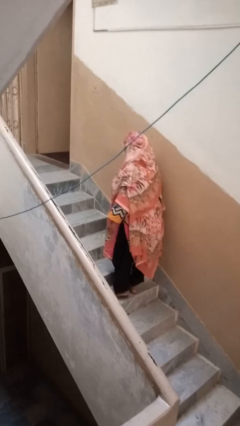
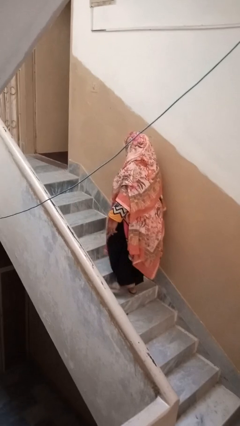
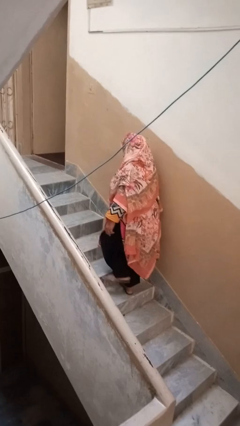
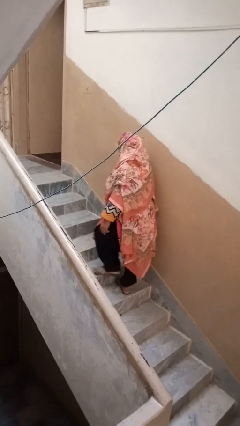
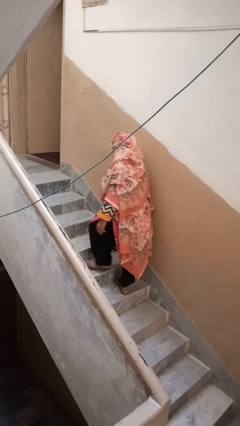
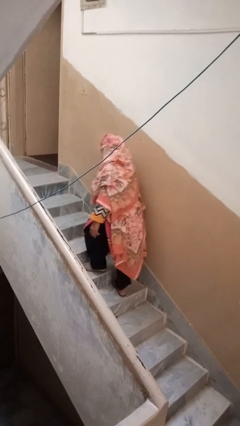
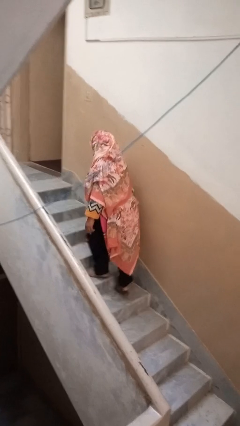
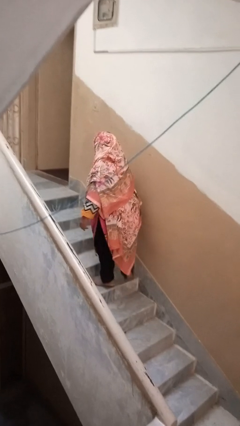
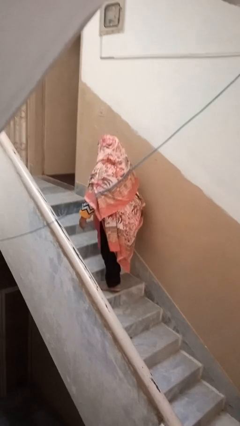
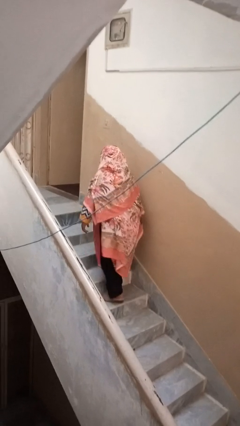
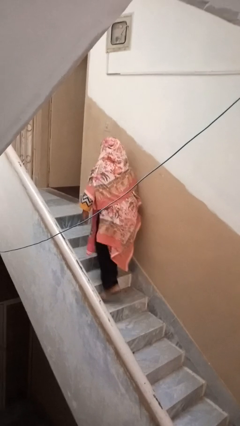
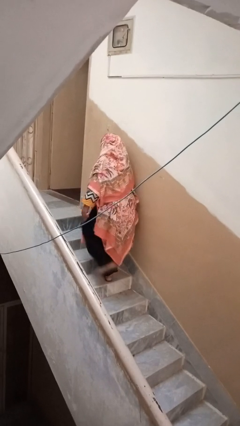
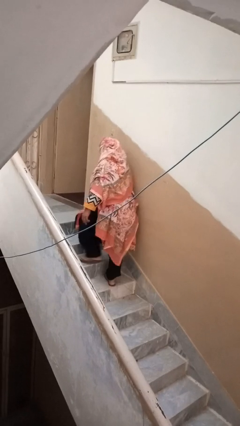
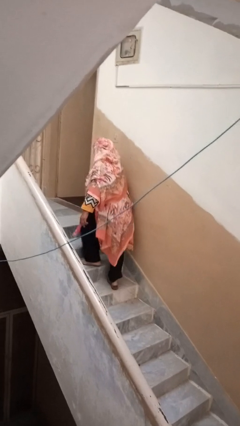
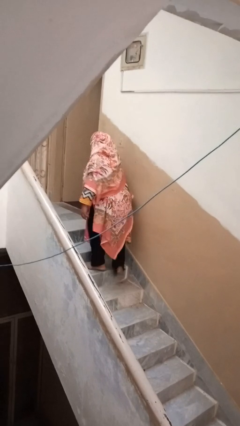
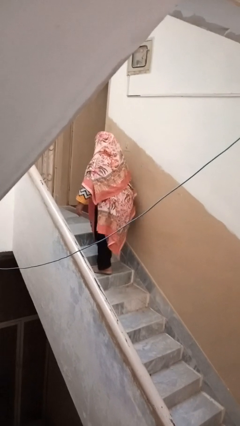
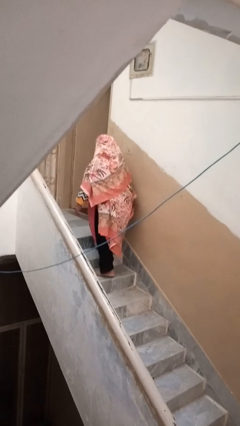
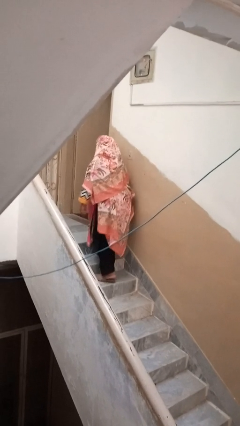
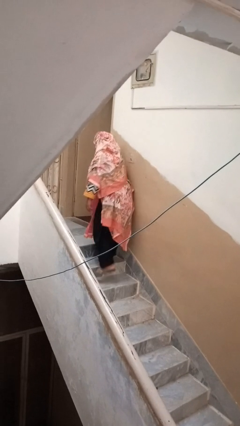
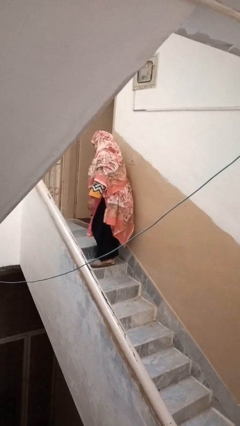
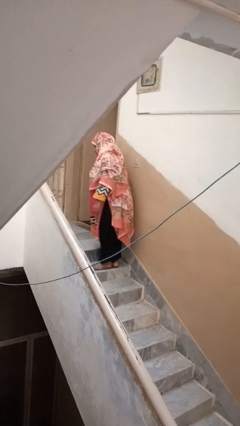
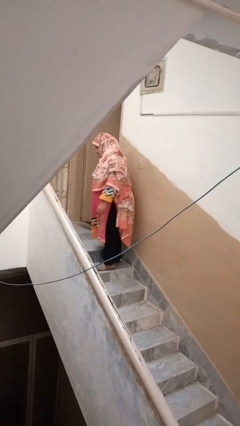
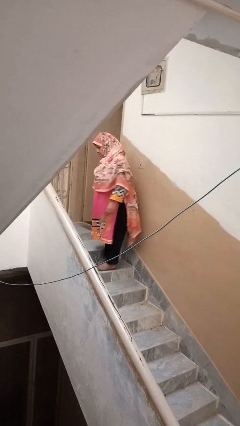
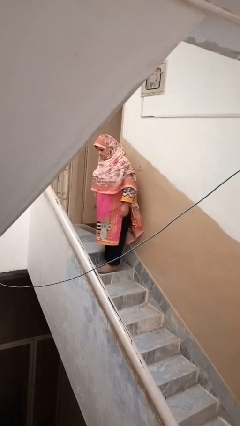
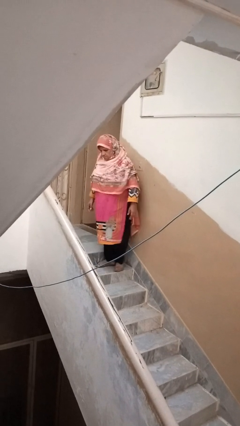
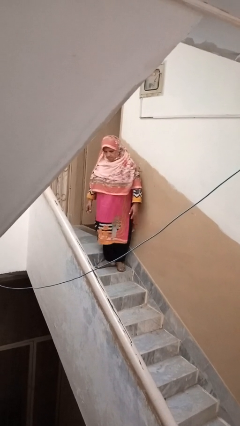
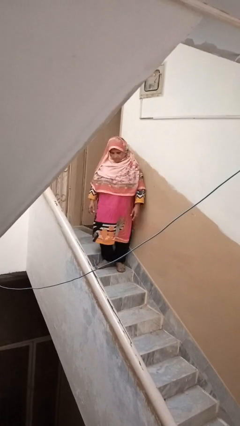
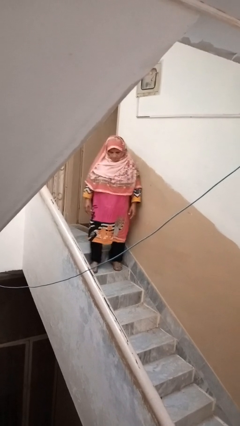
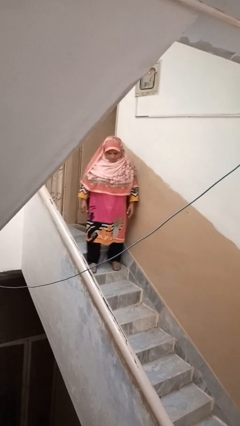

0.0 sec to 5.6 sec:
person climbs up stairs

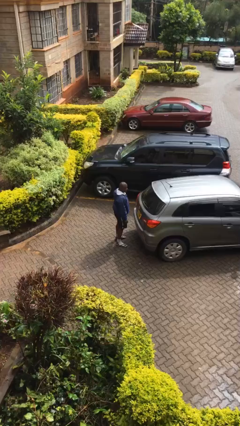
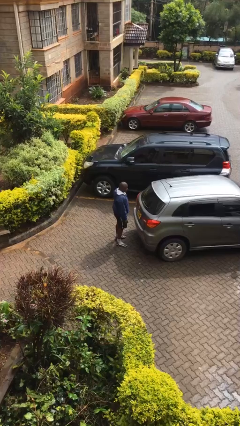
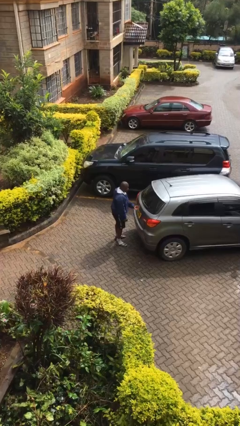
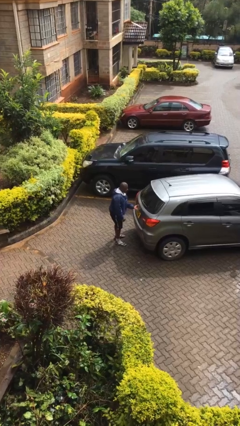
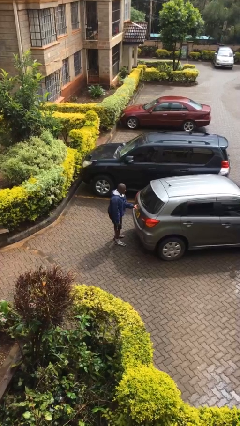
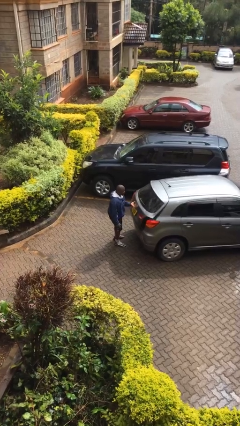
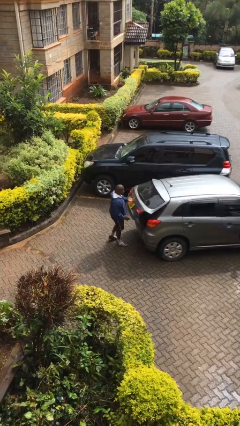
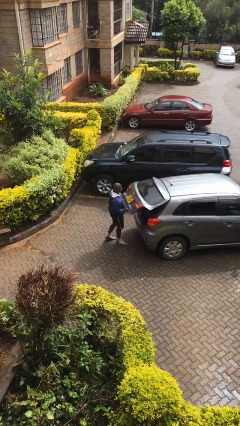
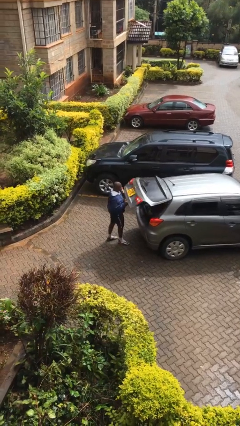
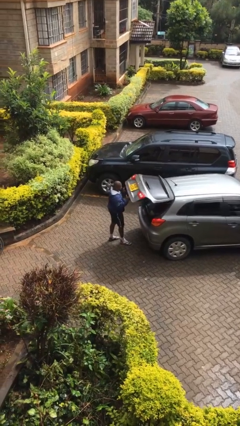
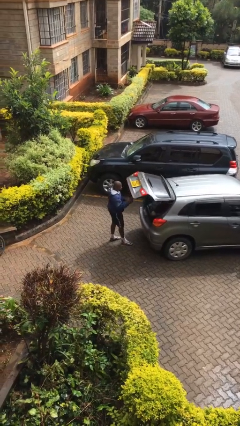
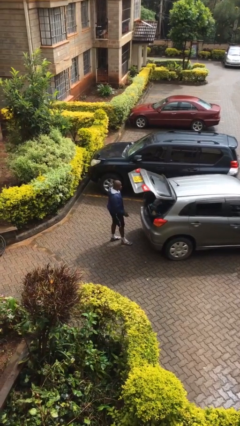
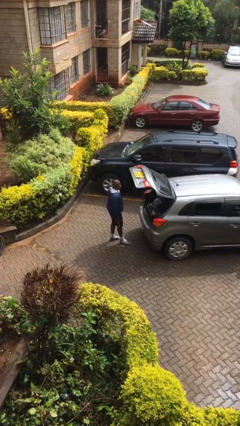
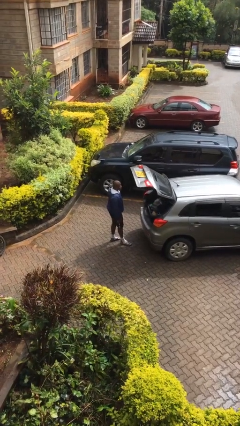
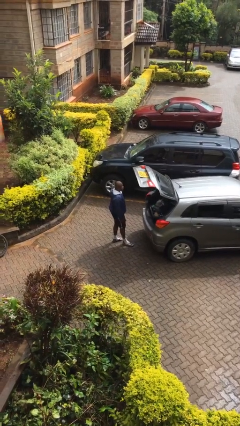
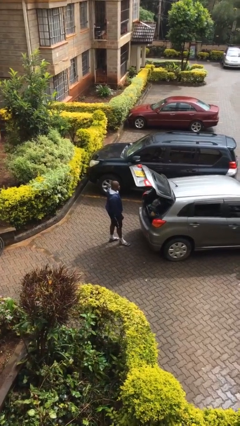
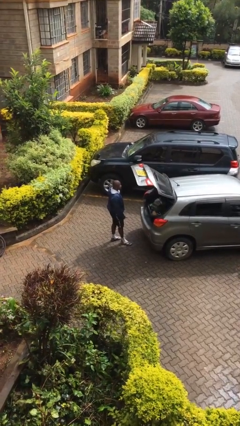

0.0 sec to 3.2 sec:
person opens car trunk

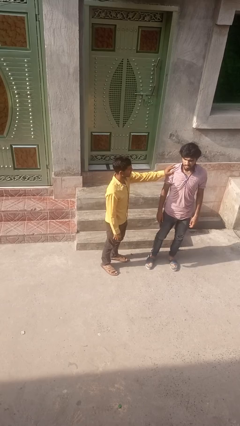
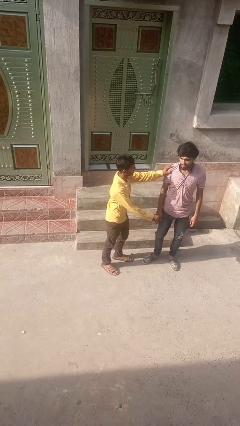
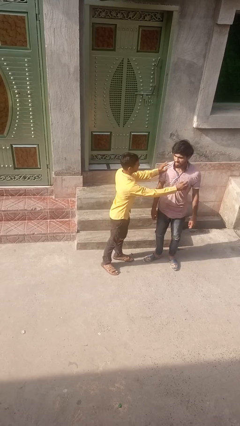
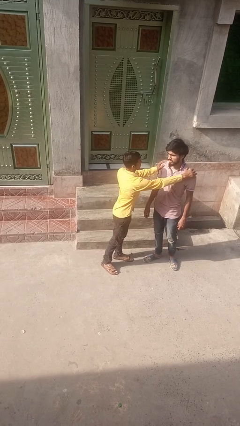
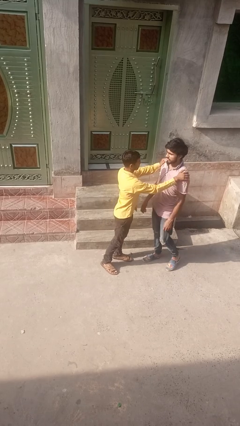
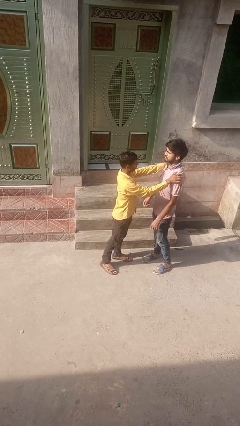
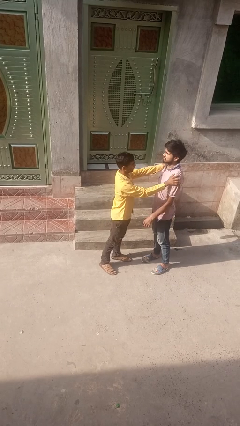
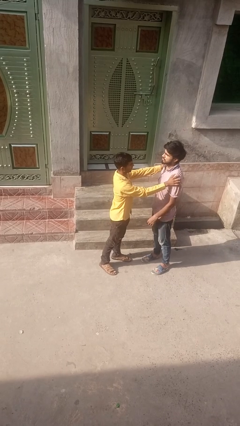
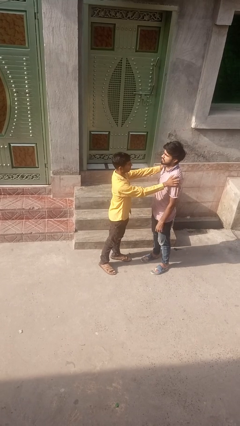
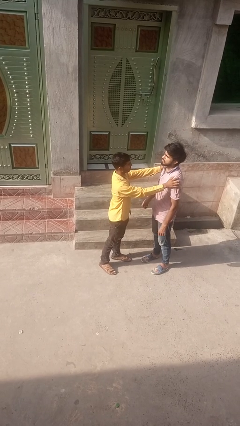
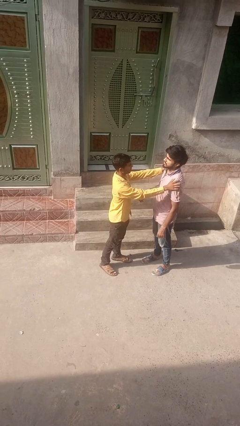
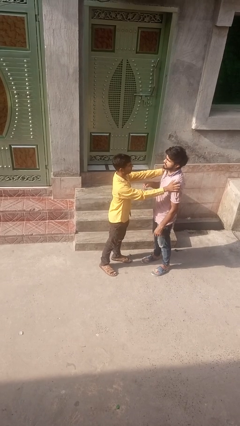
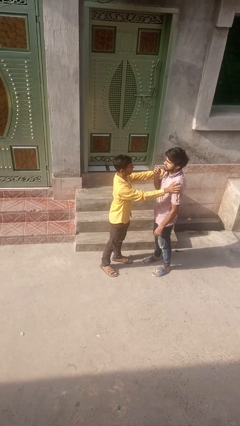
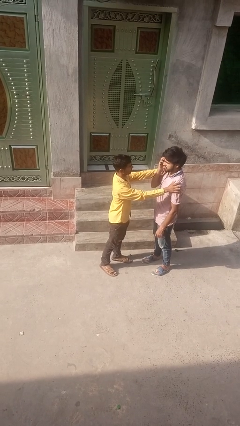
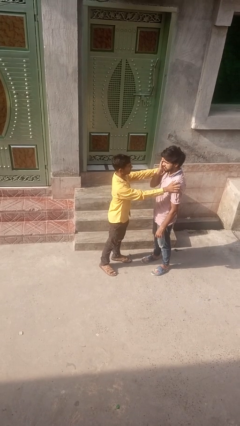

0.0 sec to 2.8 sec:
person spins person around

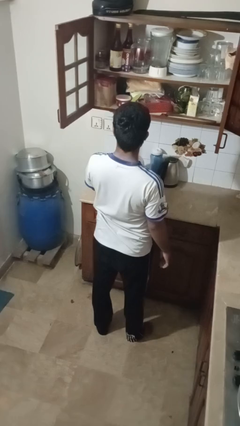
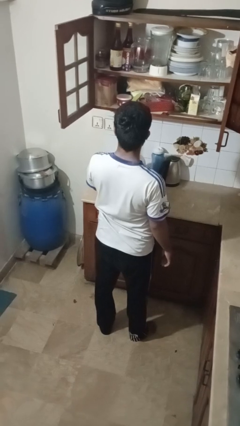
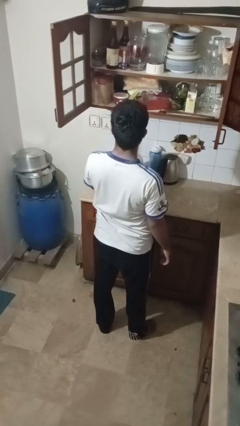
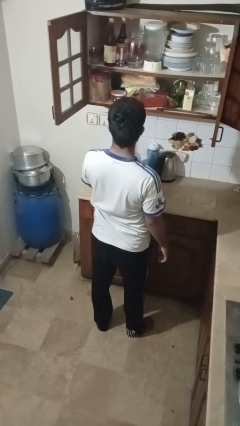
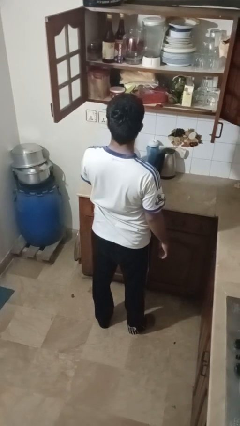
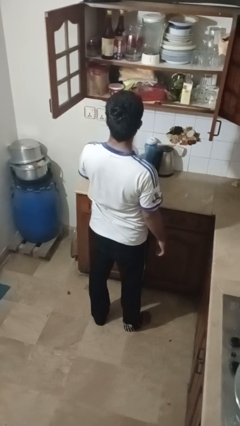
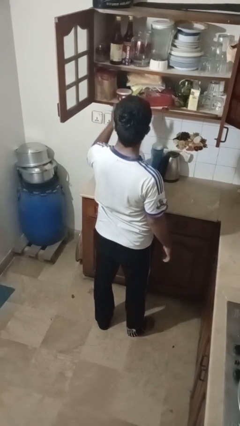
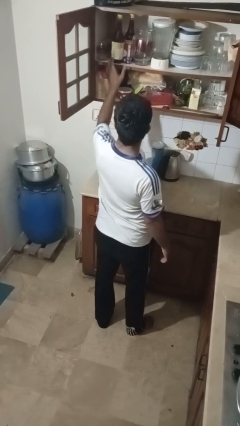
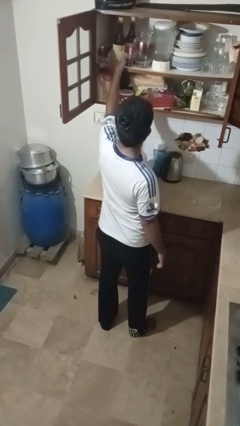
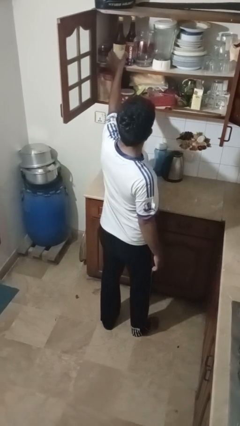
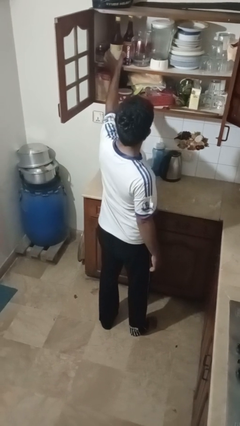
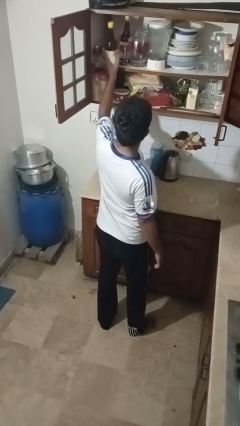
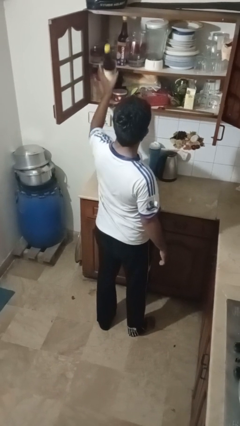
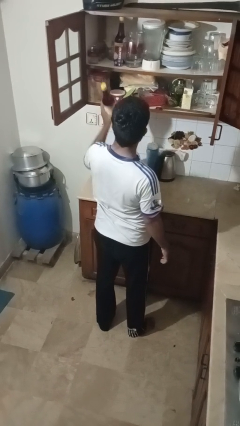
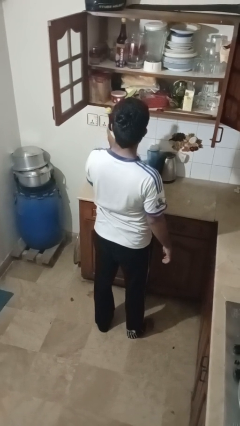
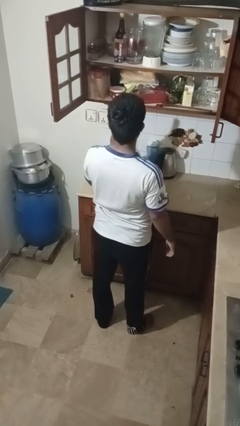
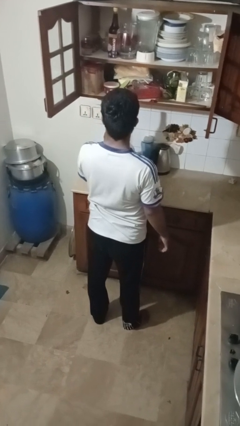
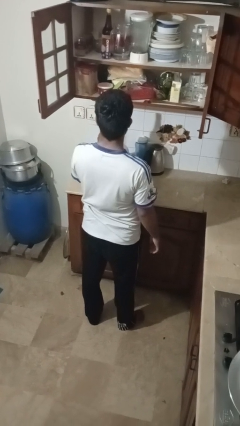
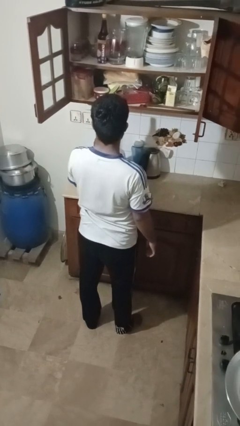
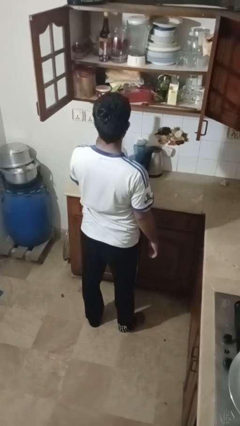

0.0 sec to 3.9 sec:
person takes object from cabinet

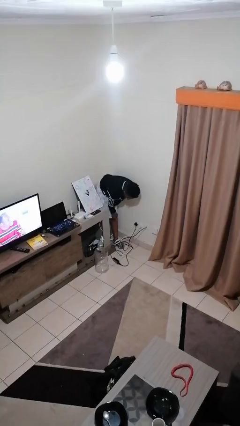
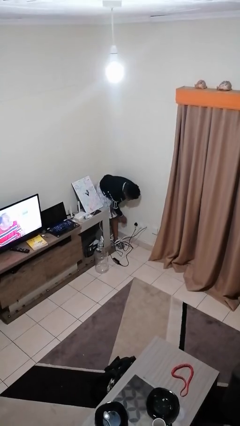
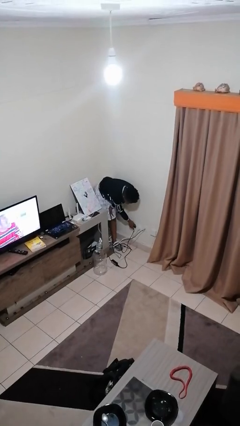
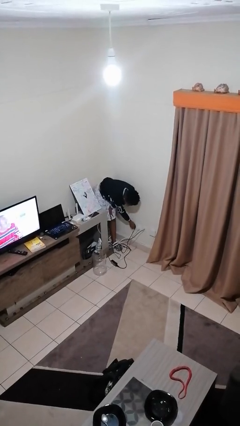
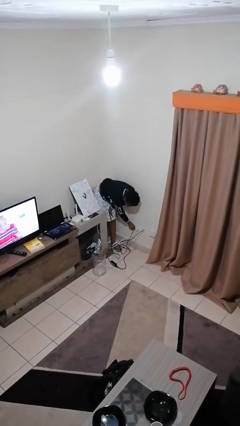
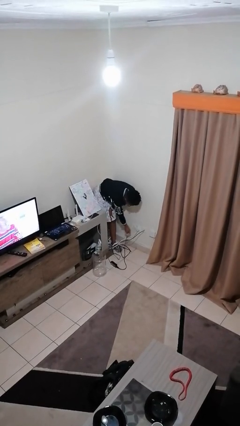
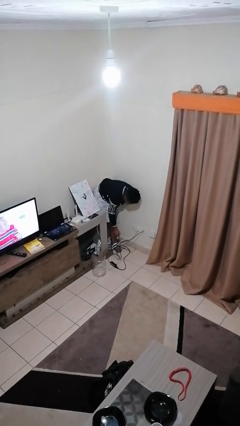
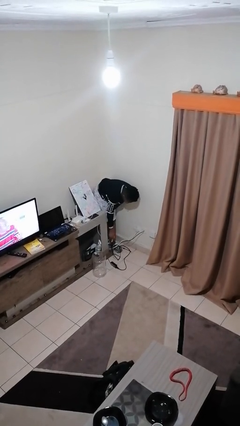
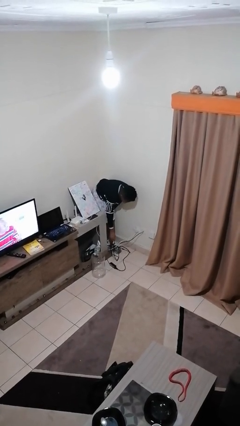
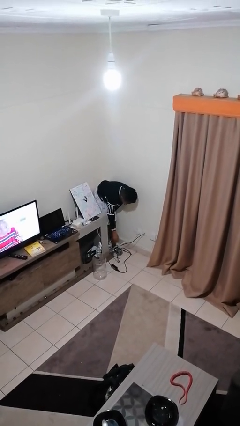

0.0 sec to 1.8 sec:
person unplugs from electrical socket
